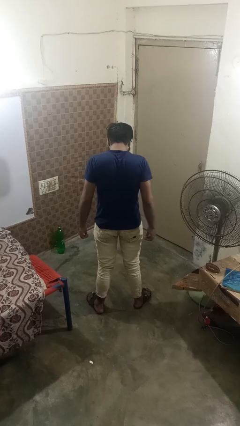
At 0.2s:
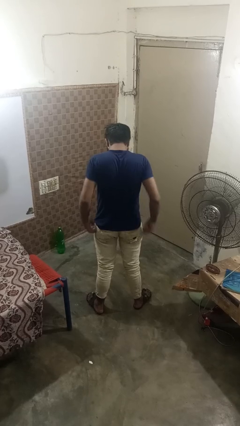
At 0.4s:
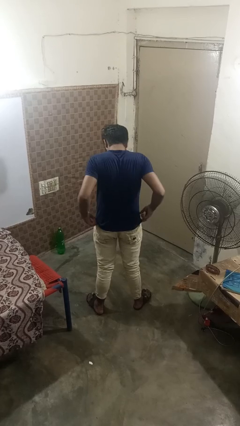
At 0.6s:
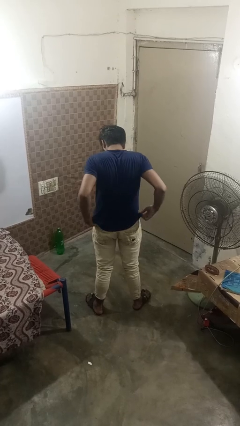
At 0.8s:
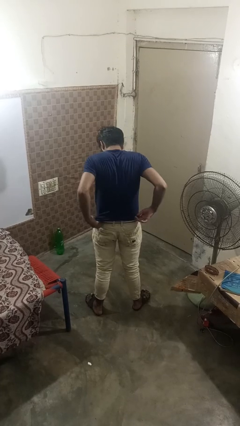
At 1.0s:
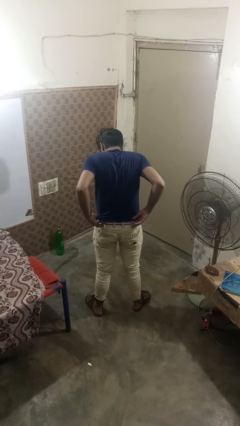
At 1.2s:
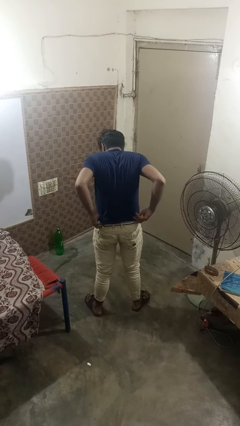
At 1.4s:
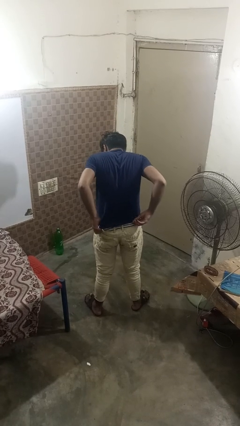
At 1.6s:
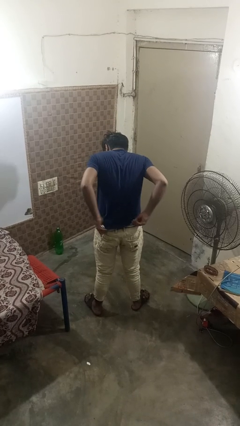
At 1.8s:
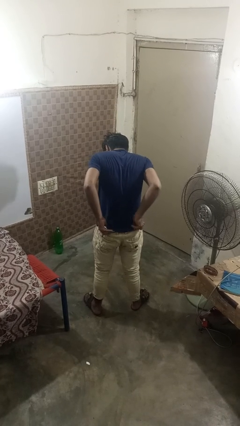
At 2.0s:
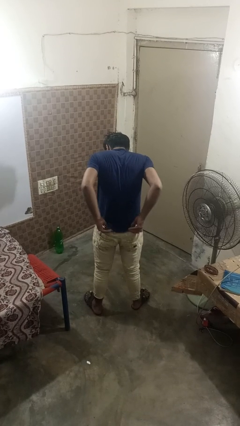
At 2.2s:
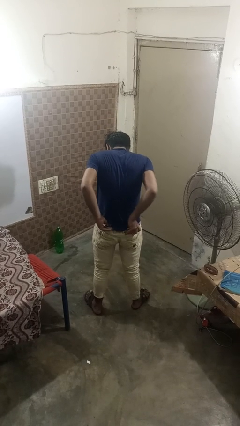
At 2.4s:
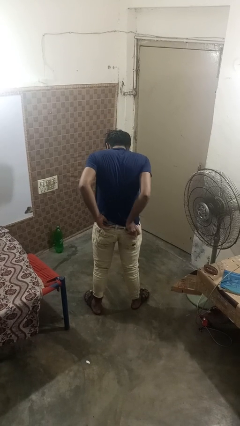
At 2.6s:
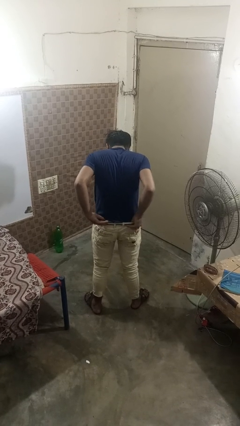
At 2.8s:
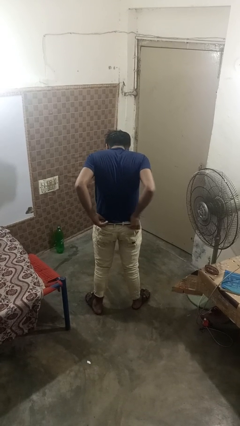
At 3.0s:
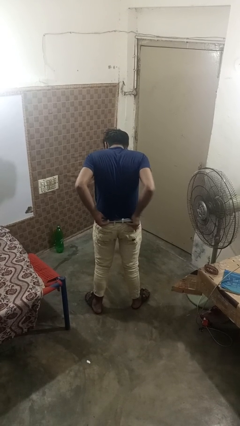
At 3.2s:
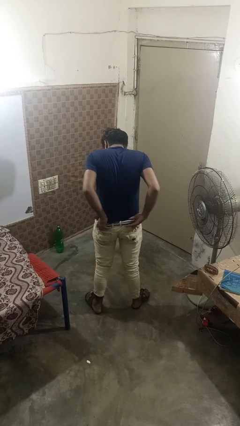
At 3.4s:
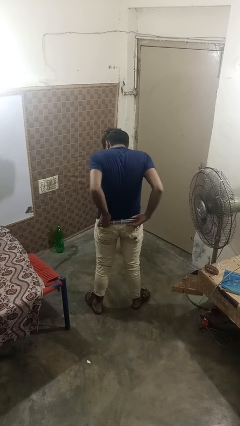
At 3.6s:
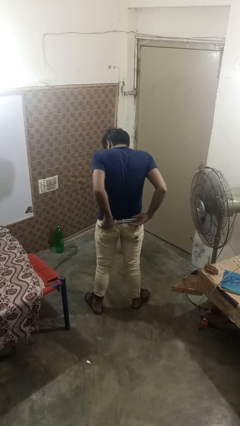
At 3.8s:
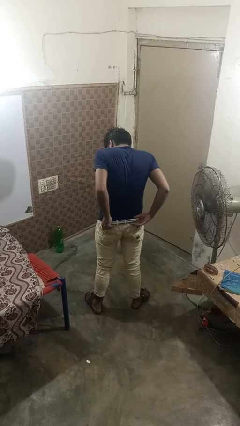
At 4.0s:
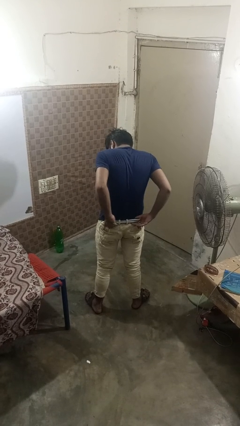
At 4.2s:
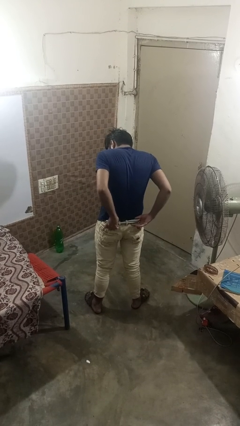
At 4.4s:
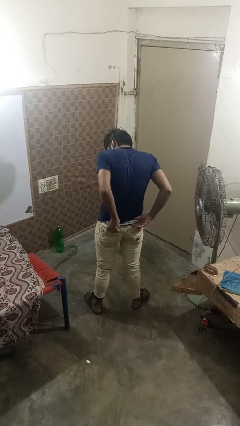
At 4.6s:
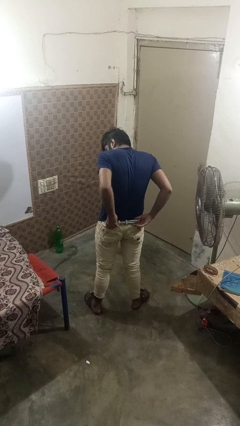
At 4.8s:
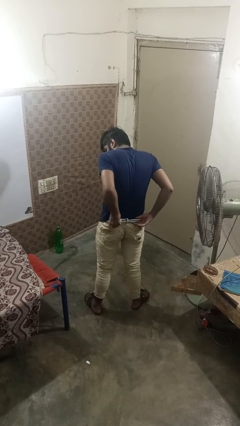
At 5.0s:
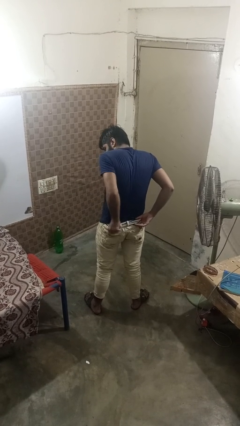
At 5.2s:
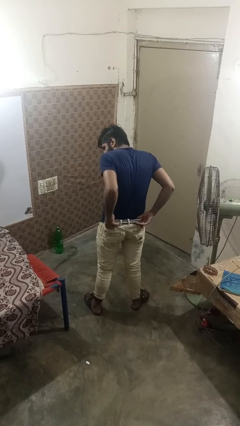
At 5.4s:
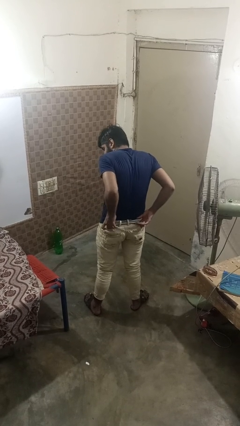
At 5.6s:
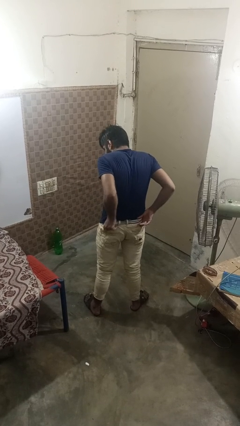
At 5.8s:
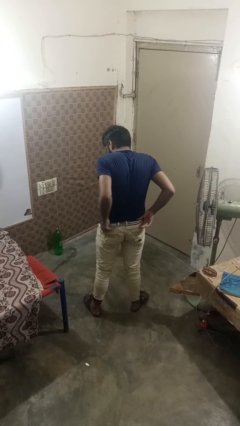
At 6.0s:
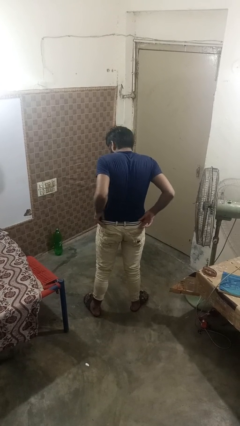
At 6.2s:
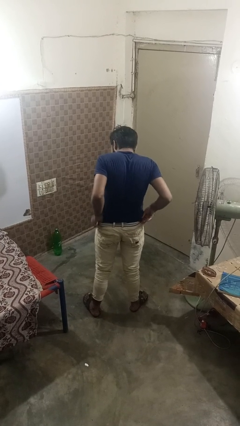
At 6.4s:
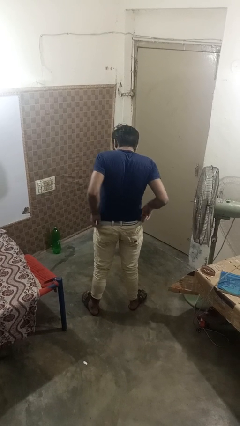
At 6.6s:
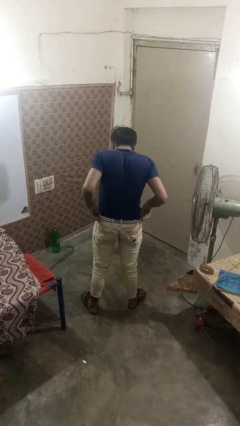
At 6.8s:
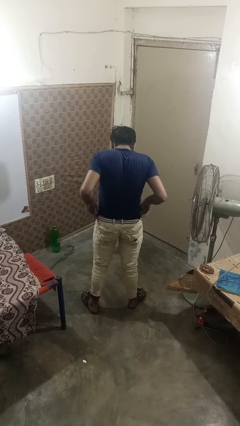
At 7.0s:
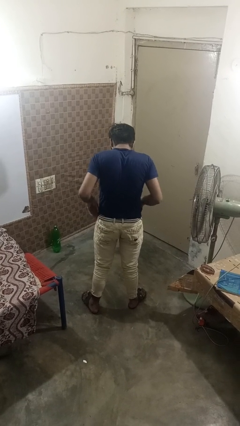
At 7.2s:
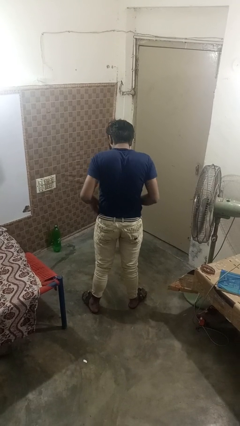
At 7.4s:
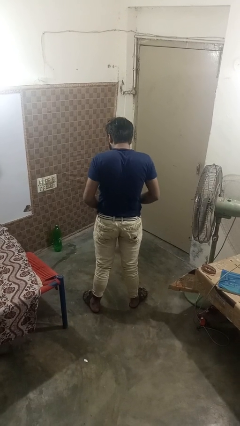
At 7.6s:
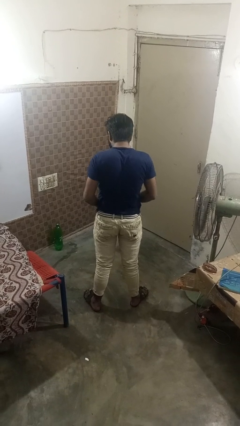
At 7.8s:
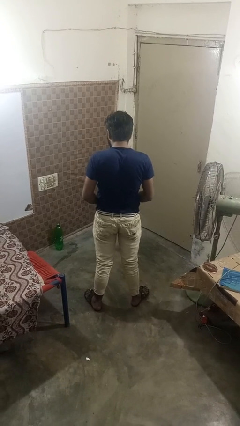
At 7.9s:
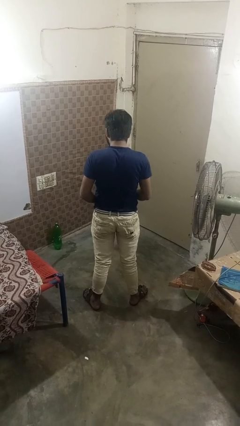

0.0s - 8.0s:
person tucks in shirt

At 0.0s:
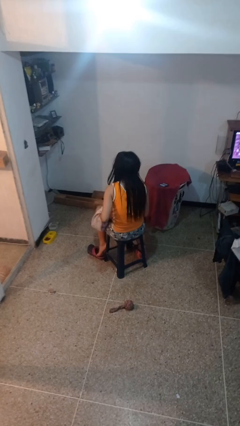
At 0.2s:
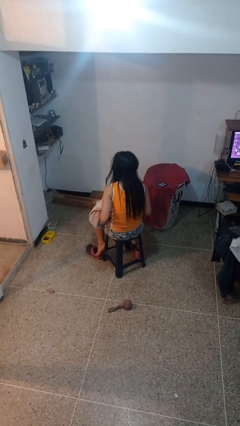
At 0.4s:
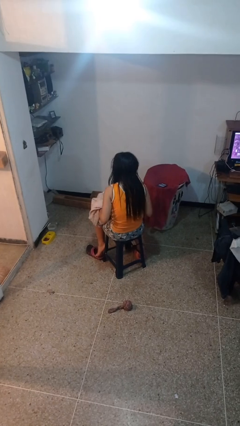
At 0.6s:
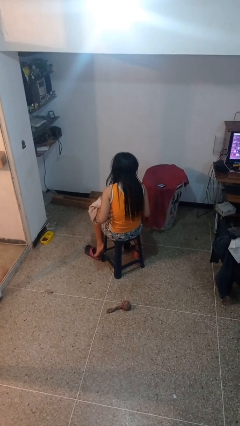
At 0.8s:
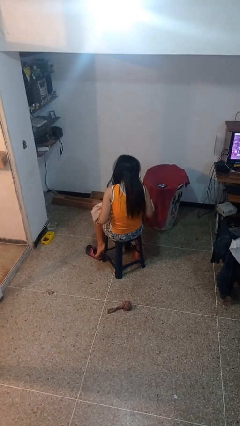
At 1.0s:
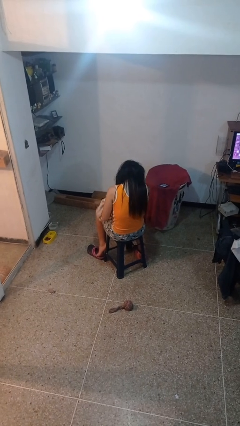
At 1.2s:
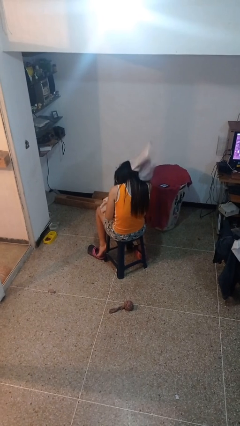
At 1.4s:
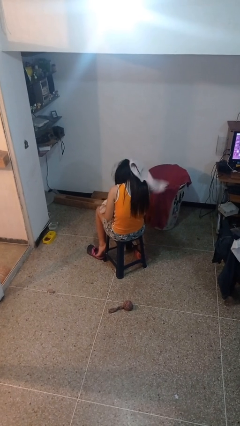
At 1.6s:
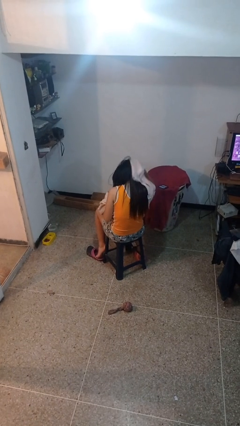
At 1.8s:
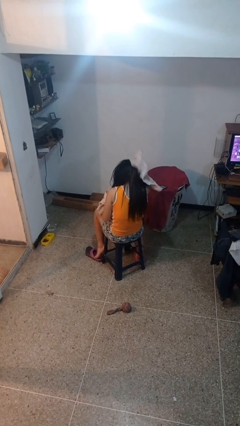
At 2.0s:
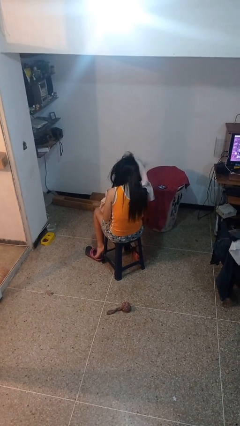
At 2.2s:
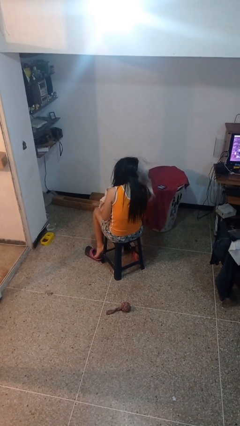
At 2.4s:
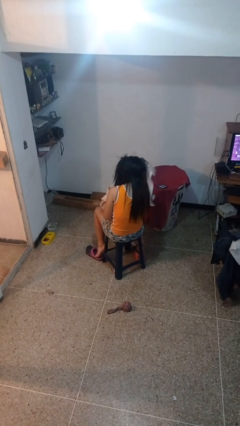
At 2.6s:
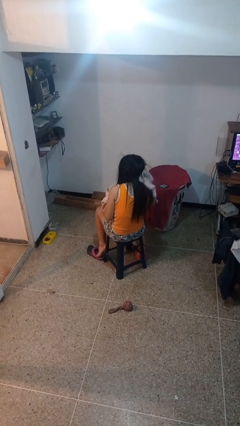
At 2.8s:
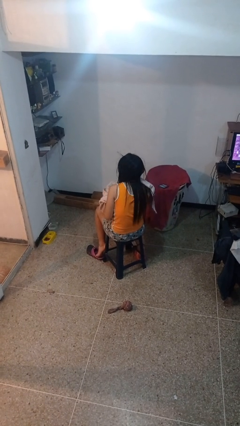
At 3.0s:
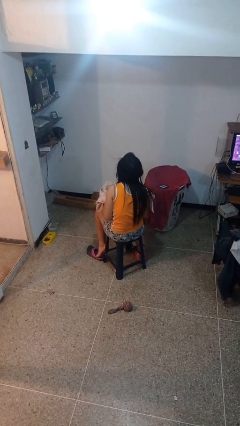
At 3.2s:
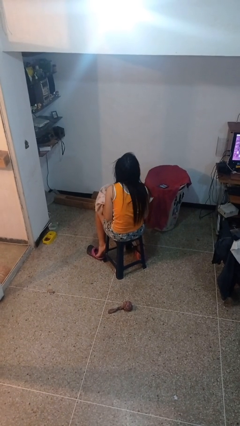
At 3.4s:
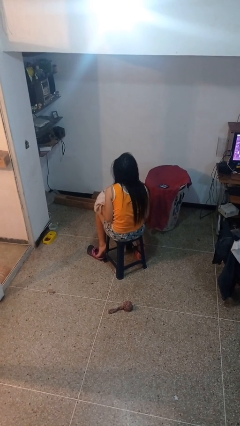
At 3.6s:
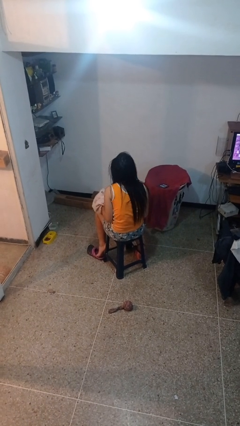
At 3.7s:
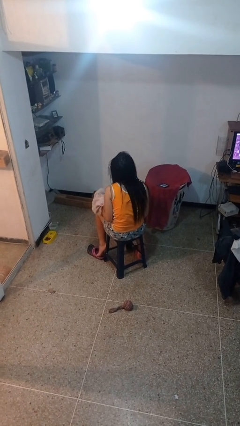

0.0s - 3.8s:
person dries hair with towel

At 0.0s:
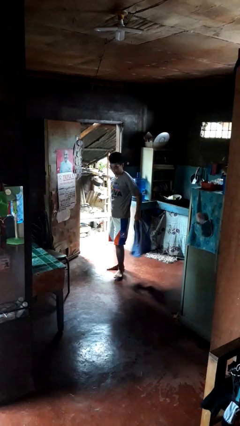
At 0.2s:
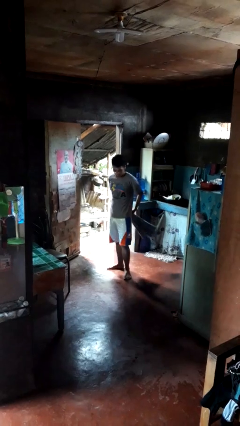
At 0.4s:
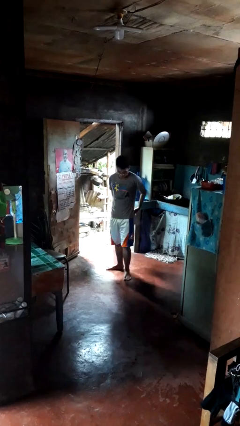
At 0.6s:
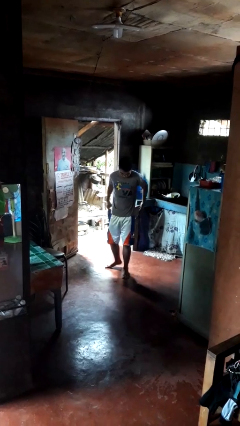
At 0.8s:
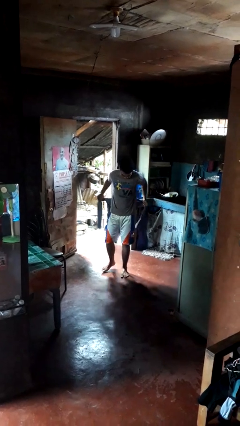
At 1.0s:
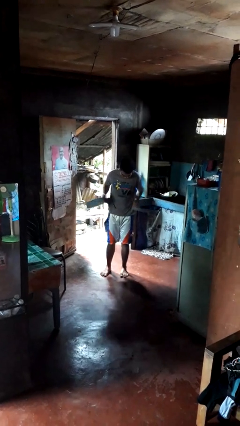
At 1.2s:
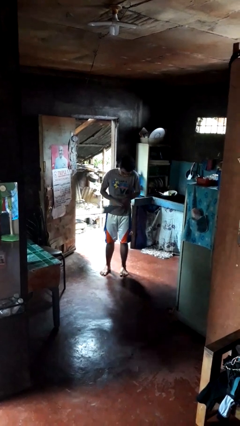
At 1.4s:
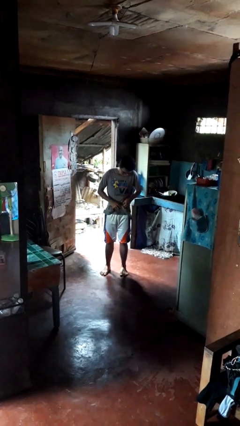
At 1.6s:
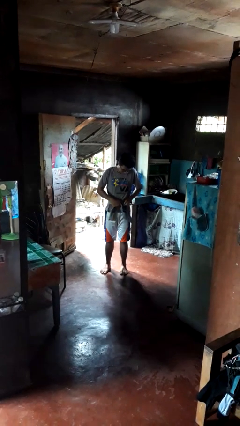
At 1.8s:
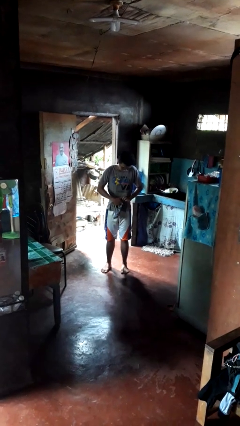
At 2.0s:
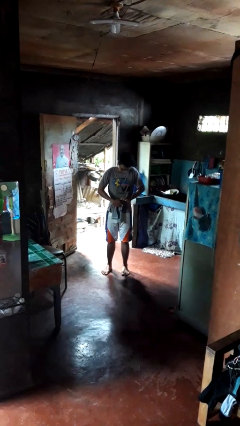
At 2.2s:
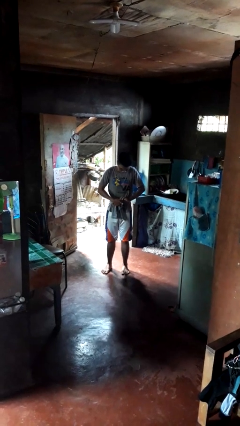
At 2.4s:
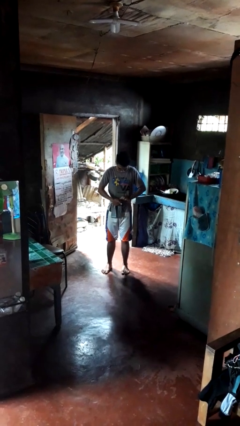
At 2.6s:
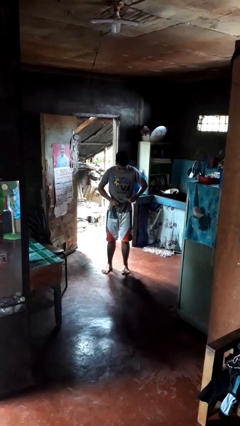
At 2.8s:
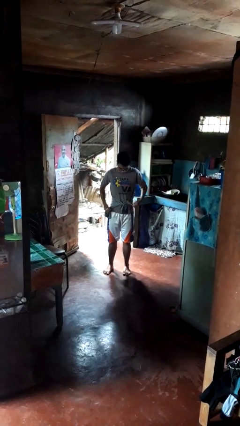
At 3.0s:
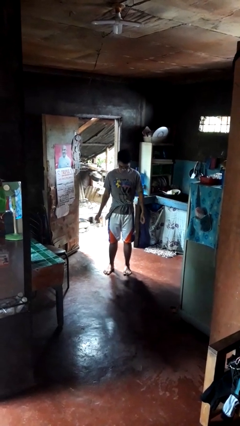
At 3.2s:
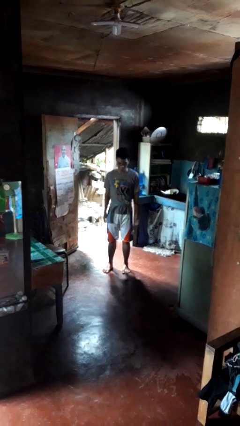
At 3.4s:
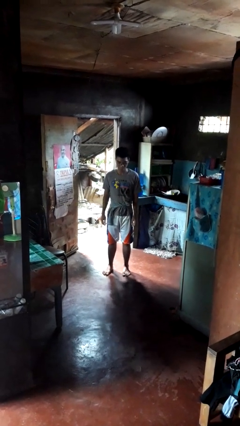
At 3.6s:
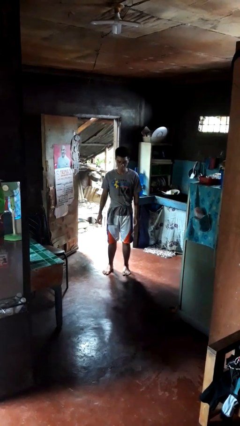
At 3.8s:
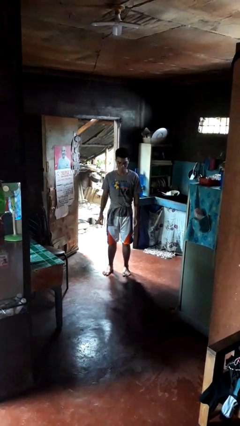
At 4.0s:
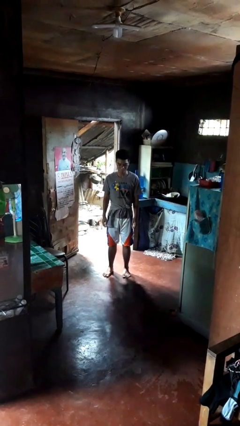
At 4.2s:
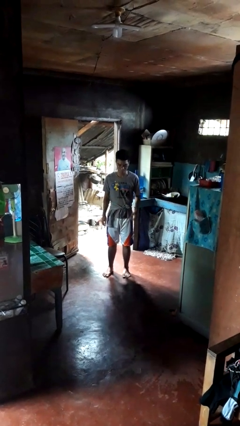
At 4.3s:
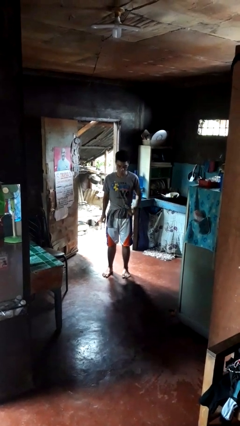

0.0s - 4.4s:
person ties jacket around waist

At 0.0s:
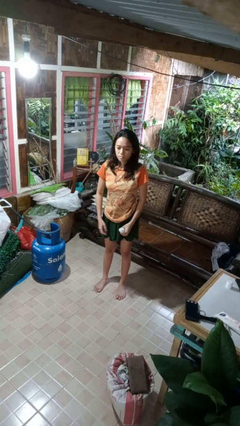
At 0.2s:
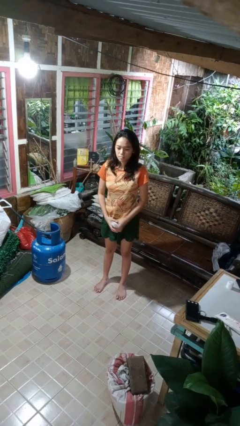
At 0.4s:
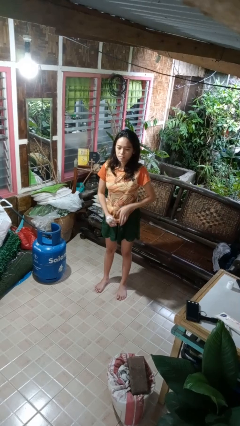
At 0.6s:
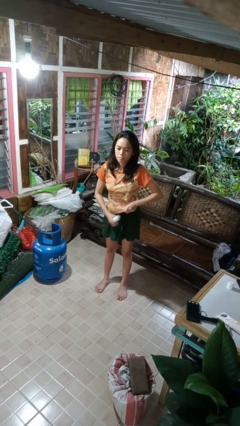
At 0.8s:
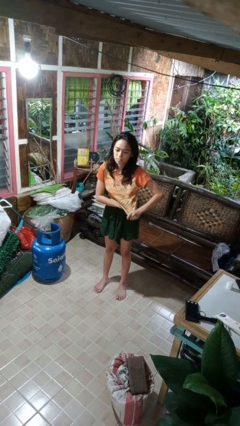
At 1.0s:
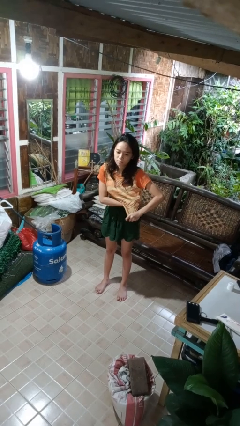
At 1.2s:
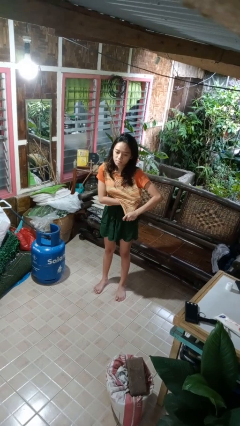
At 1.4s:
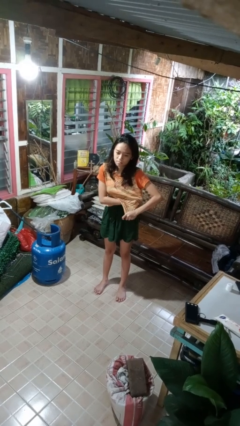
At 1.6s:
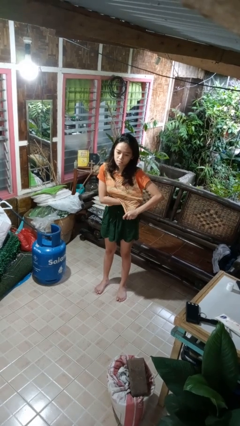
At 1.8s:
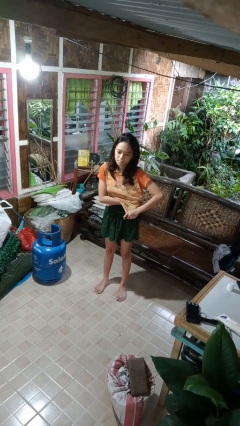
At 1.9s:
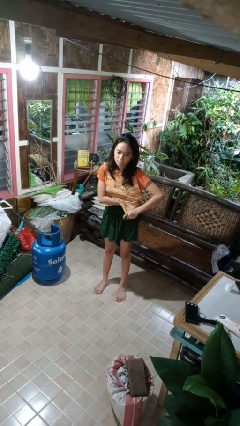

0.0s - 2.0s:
person applies deodorant
